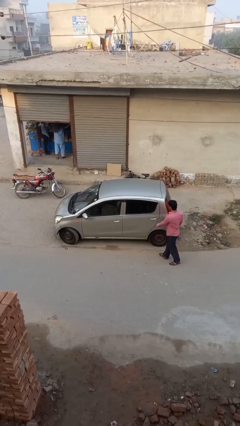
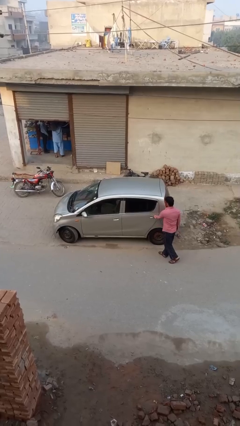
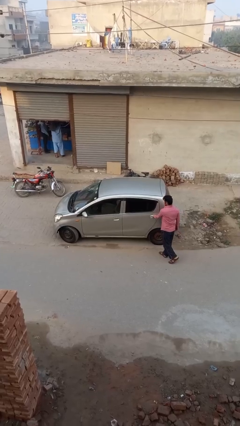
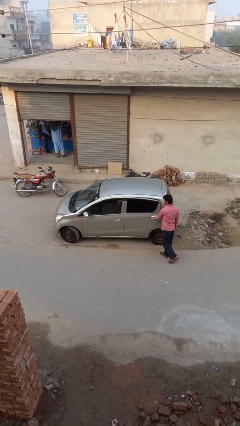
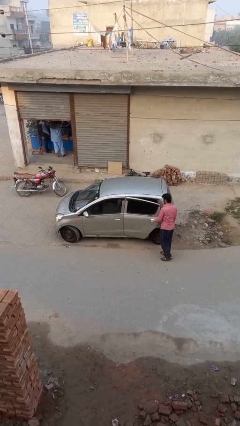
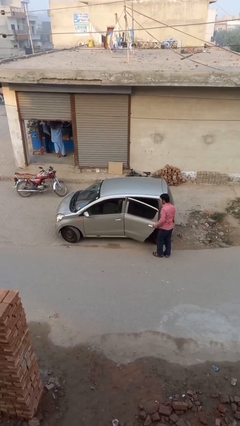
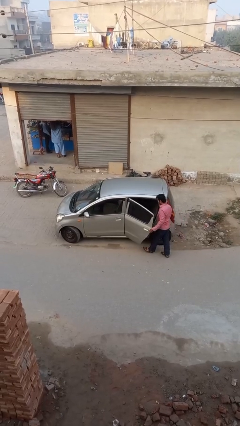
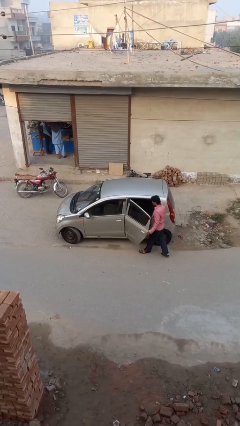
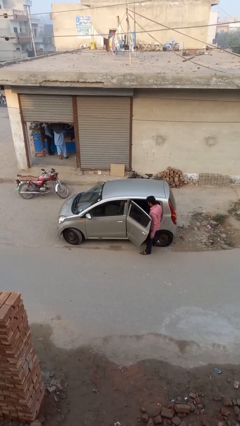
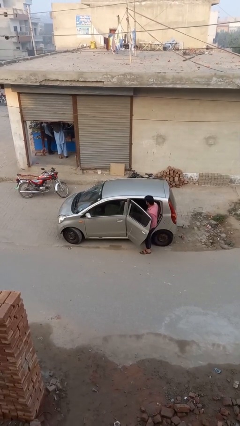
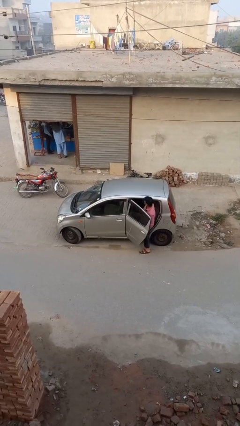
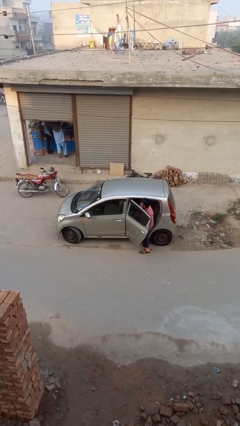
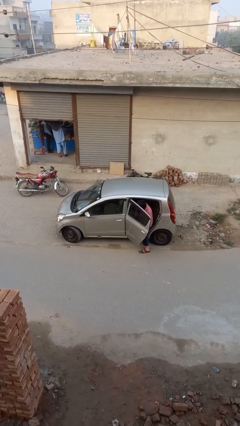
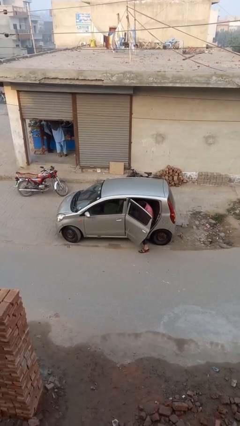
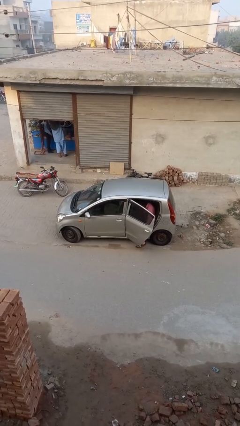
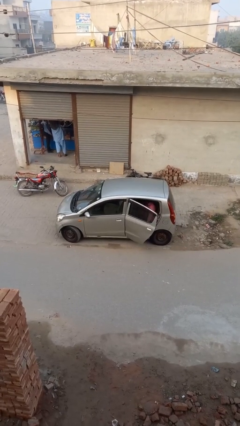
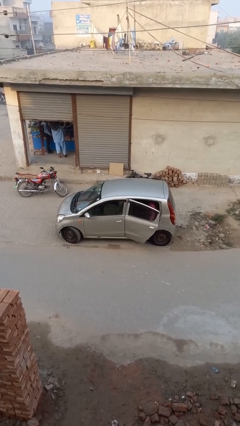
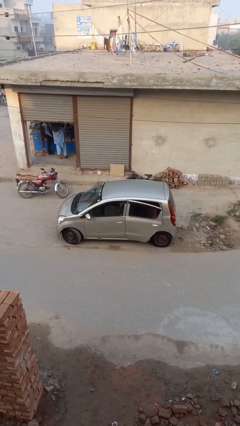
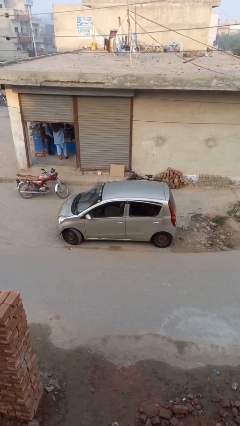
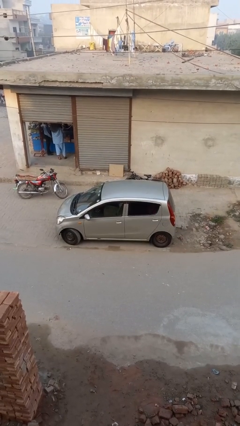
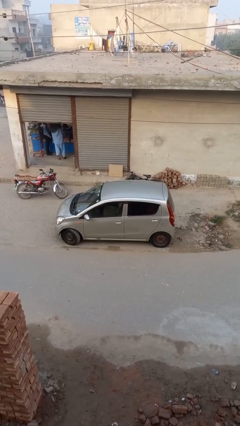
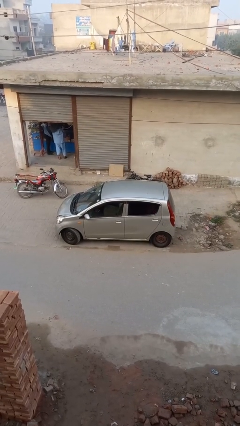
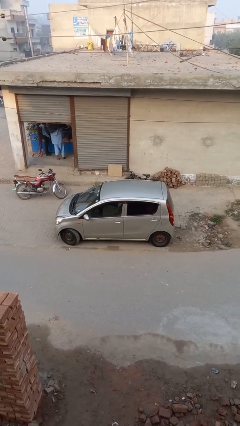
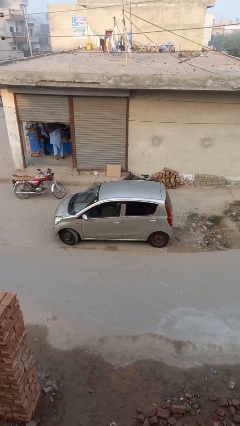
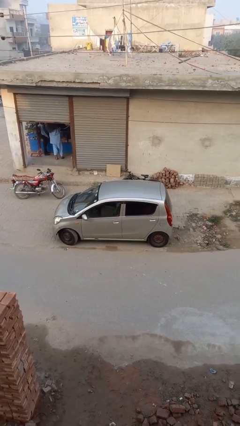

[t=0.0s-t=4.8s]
car picks up person

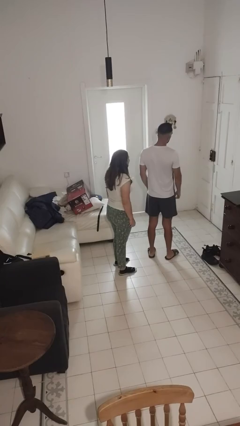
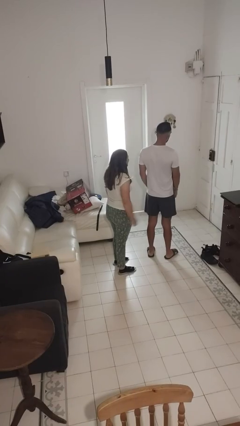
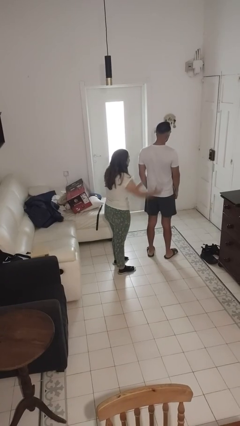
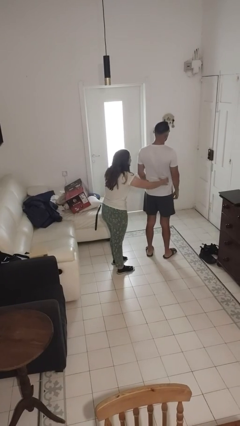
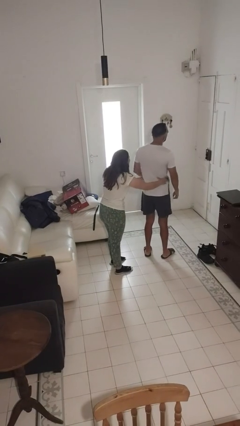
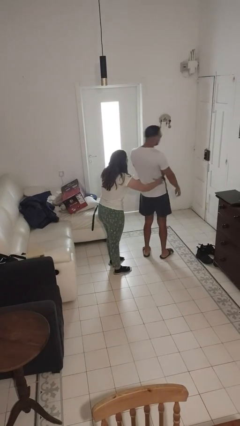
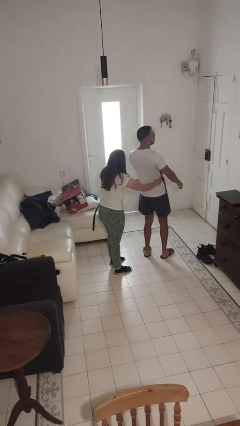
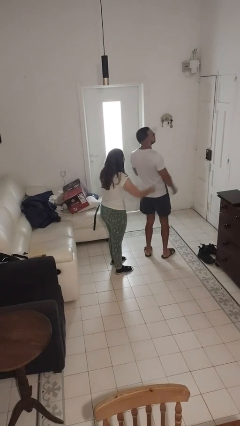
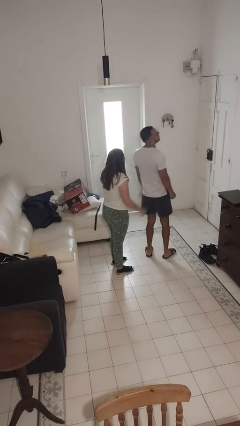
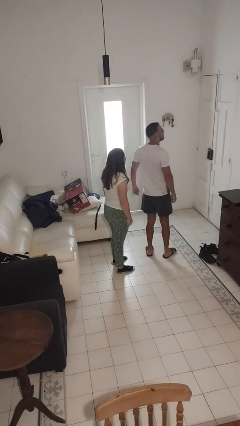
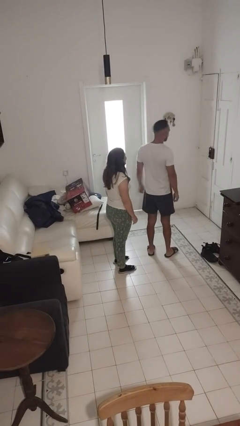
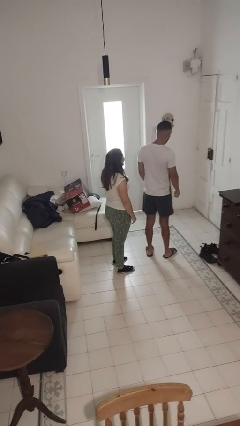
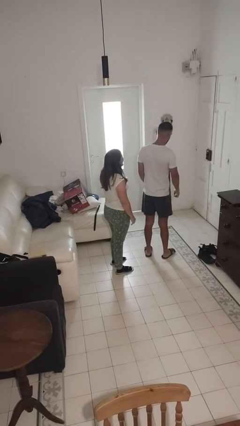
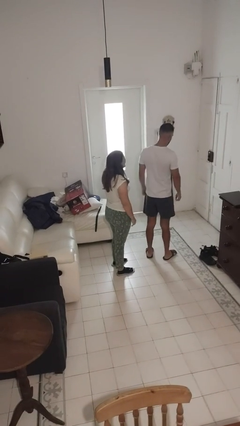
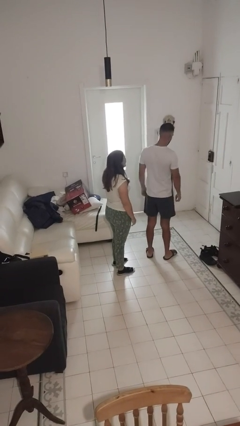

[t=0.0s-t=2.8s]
person tickles person

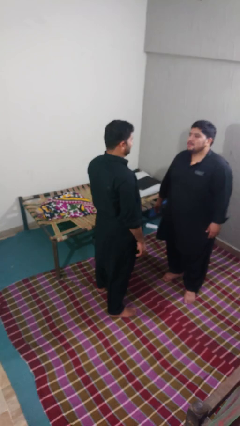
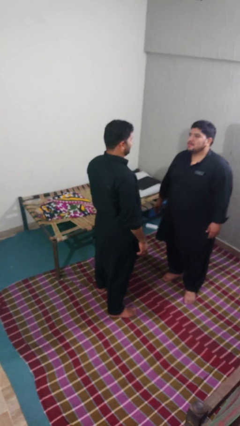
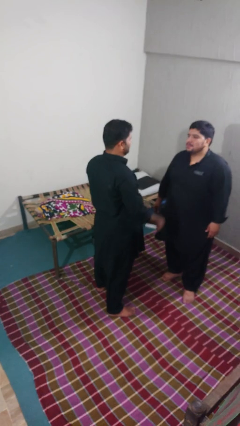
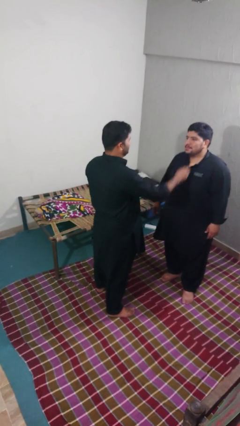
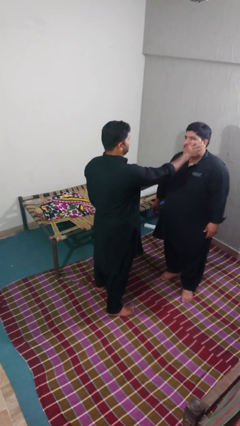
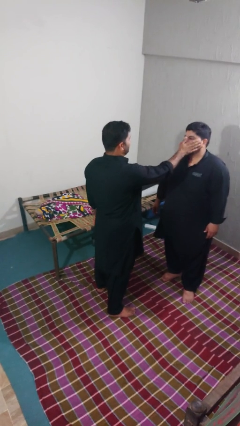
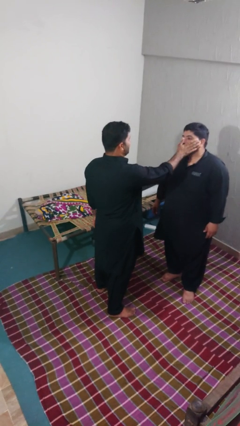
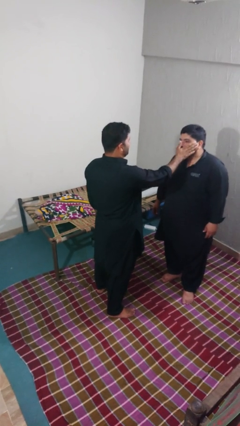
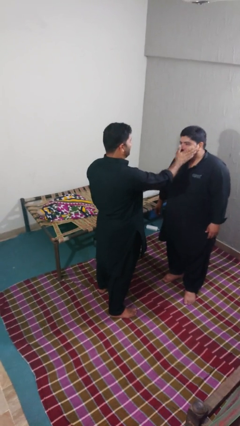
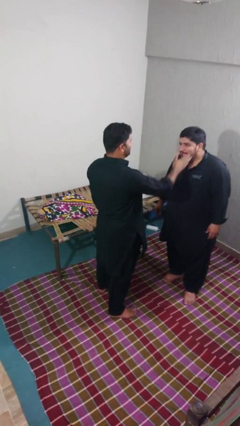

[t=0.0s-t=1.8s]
person touches face of person

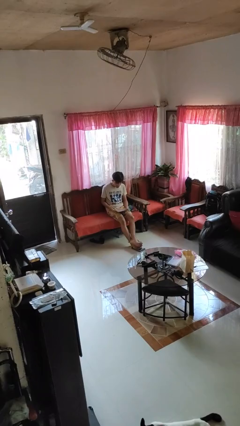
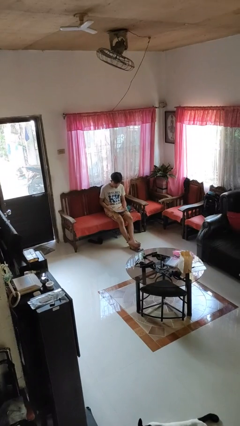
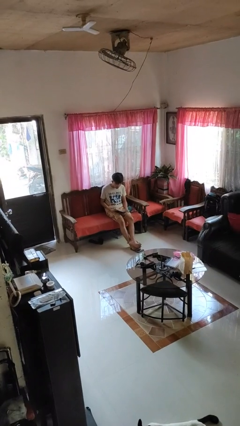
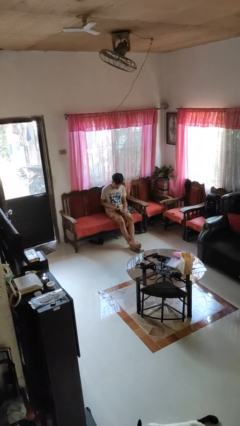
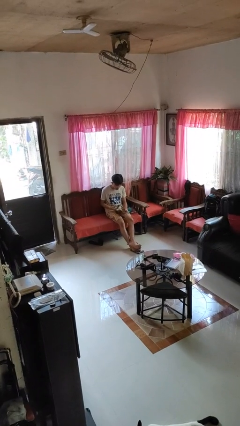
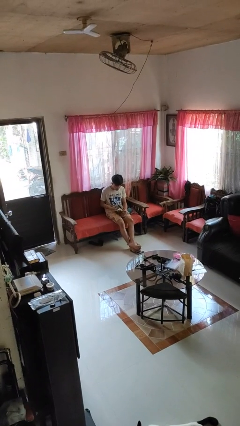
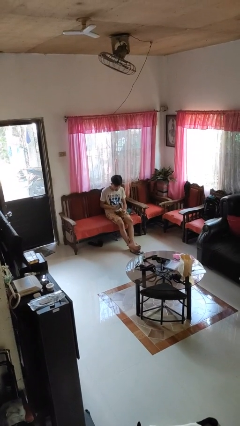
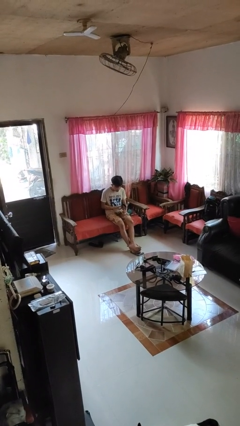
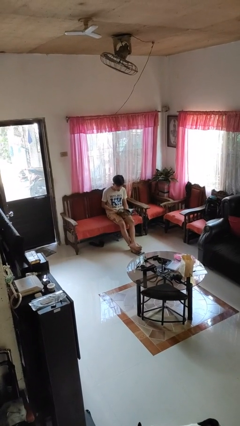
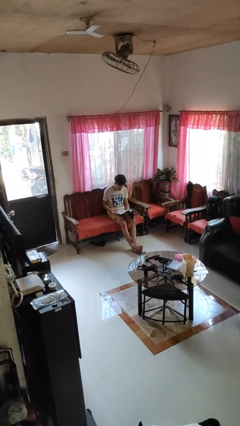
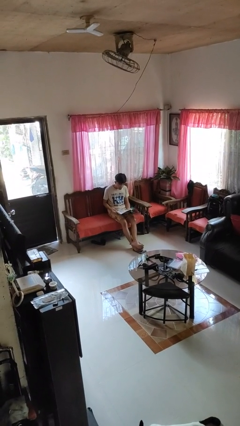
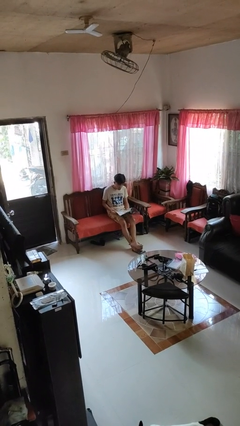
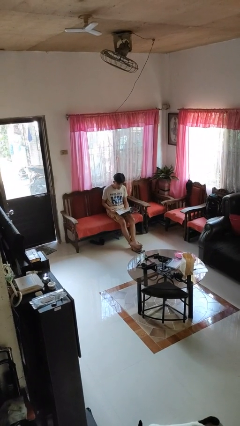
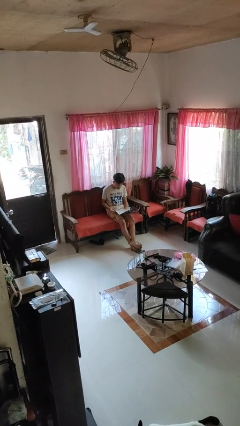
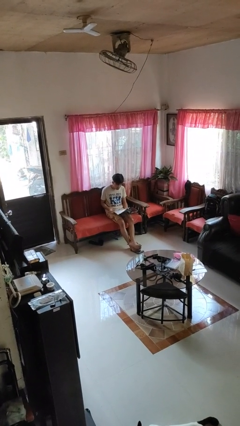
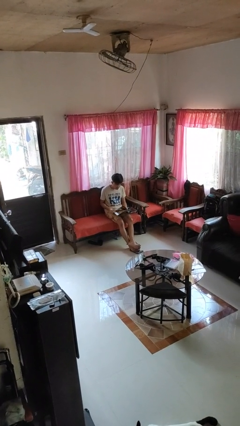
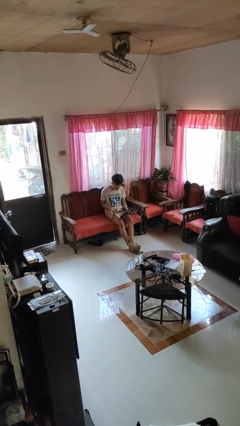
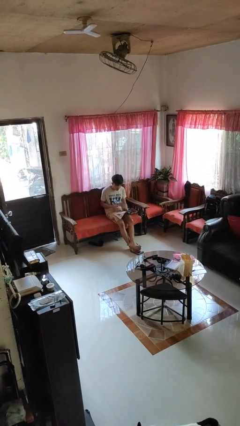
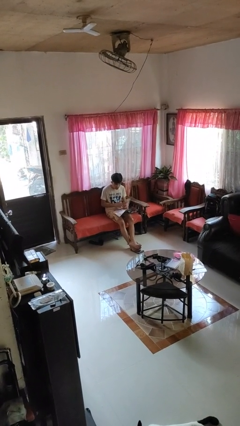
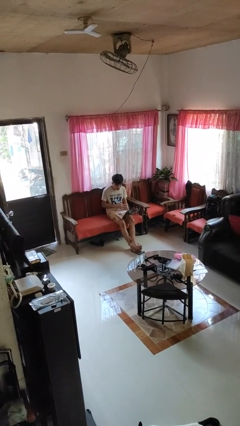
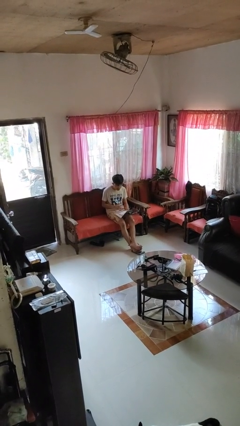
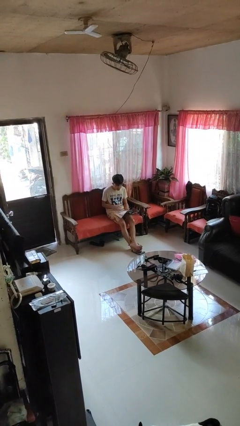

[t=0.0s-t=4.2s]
person reads magazine

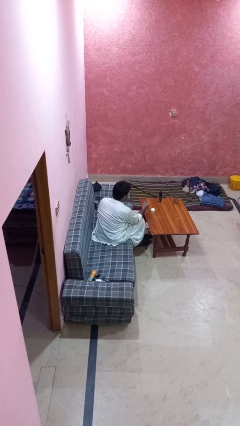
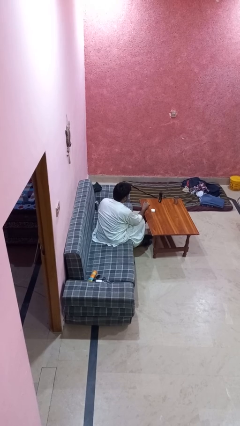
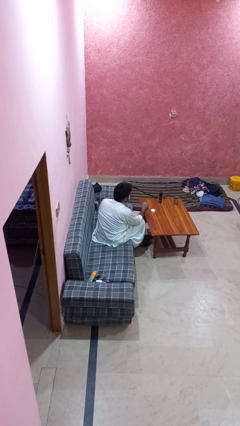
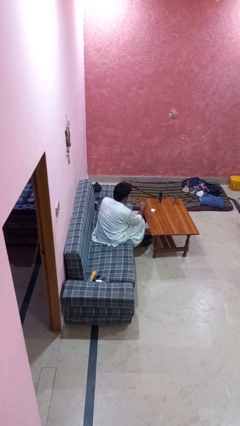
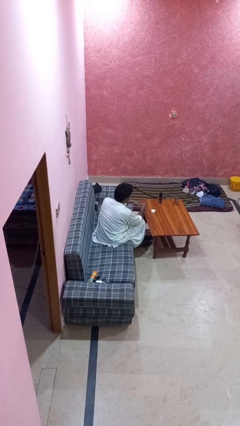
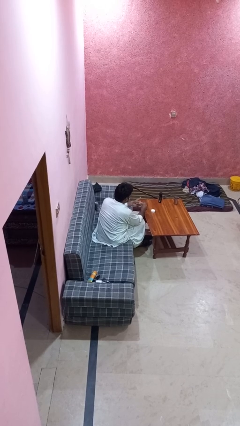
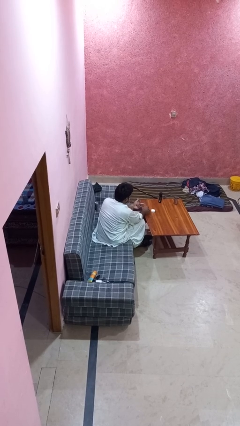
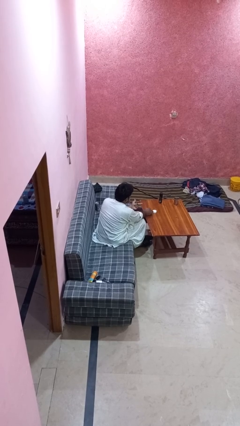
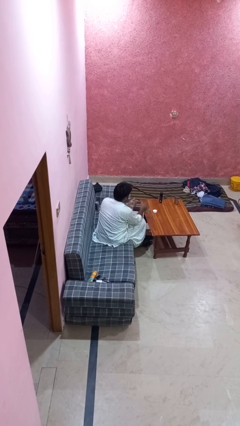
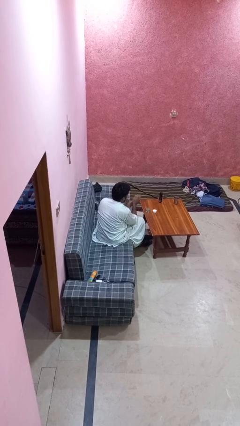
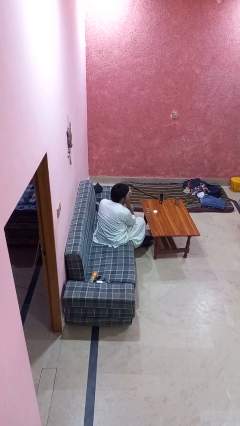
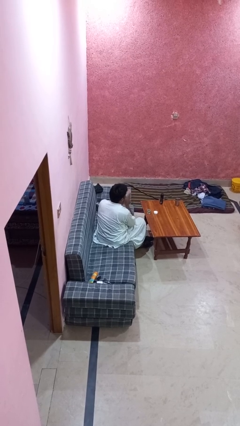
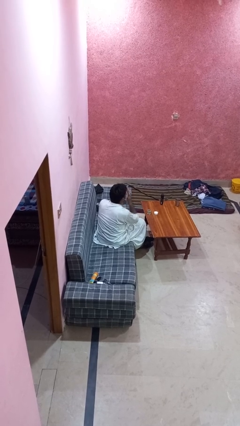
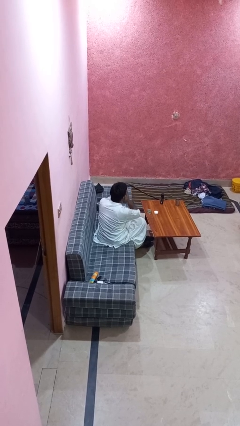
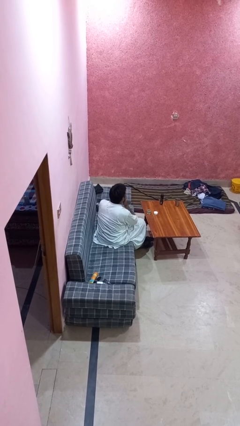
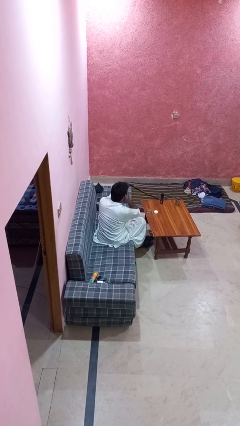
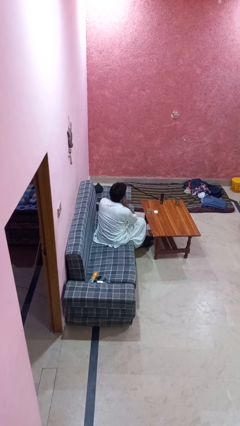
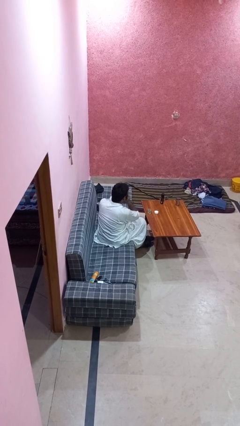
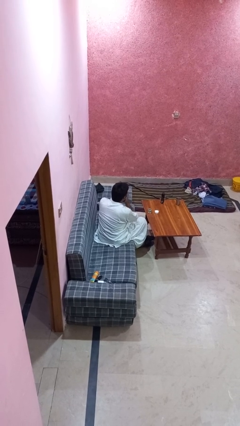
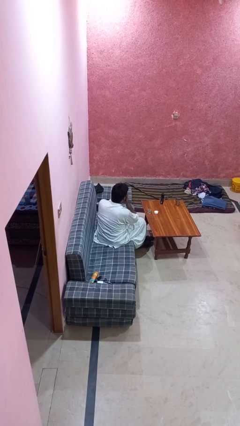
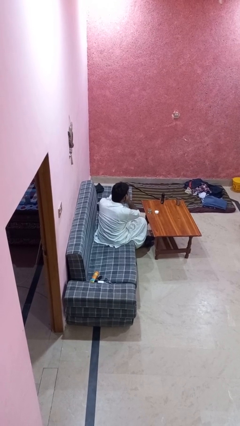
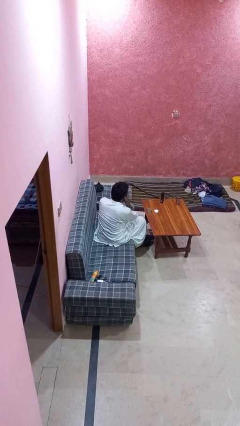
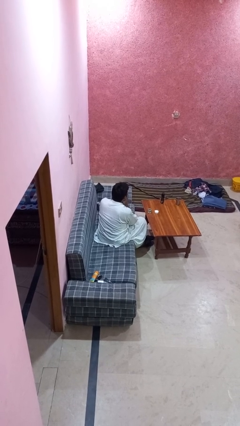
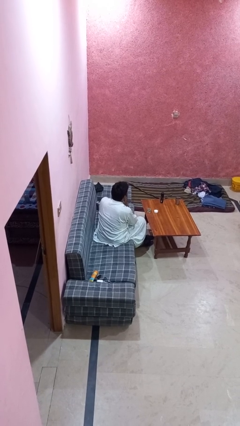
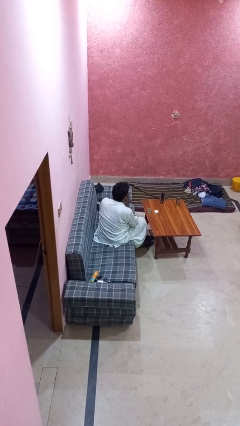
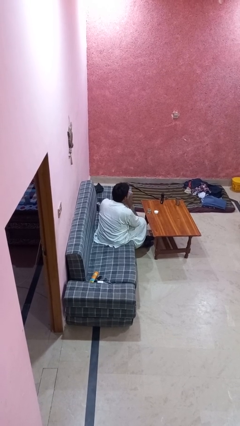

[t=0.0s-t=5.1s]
person applies facial moisturizer
